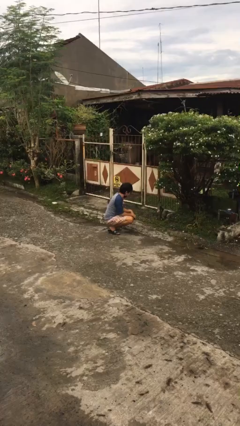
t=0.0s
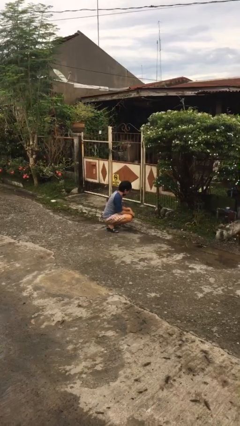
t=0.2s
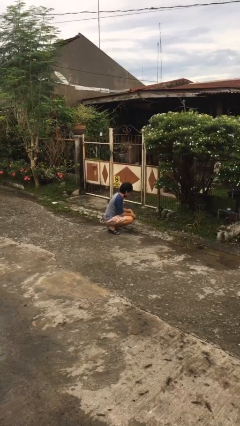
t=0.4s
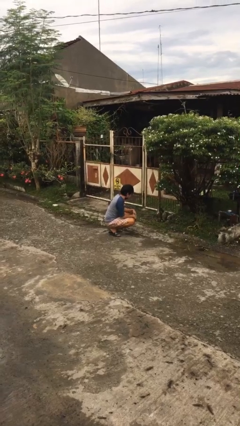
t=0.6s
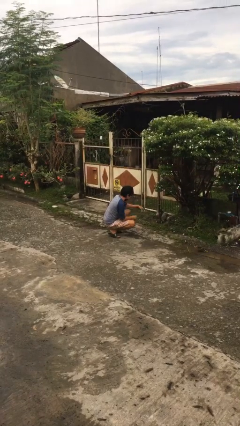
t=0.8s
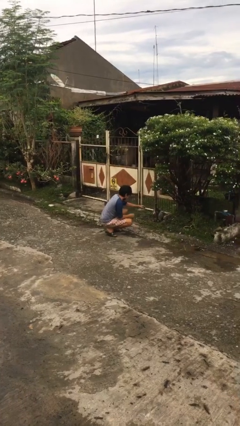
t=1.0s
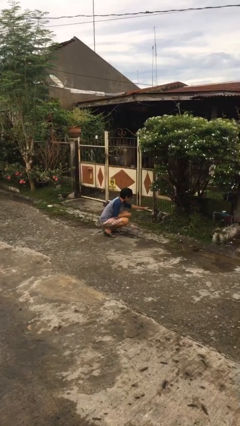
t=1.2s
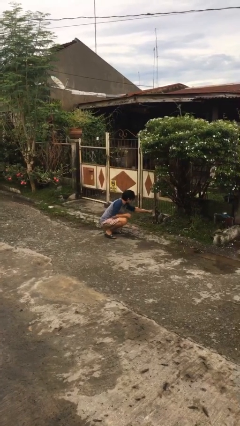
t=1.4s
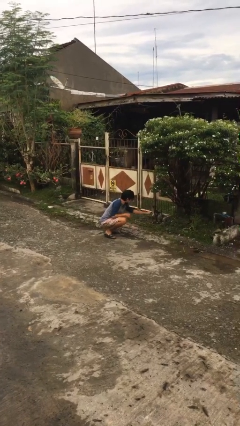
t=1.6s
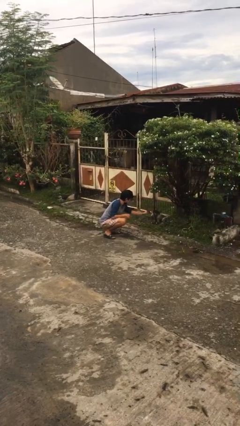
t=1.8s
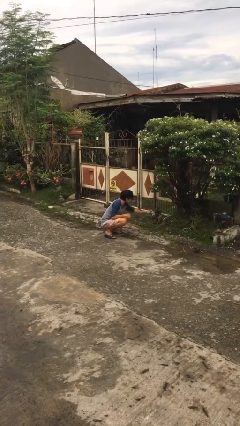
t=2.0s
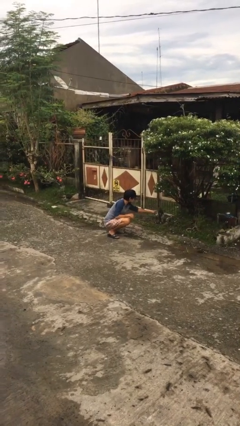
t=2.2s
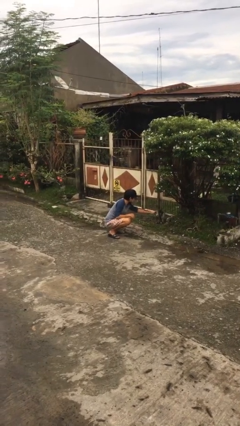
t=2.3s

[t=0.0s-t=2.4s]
person pets cat

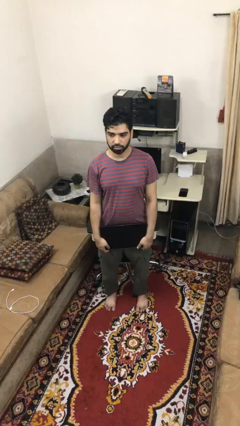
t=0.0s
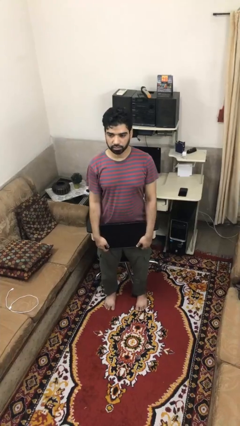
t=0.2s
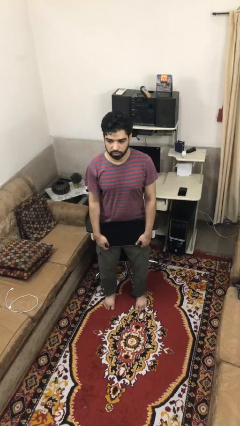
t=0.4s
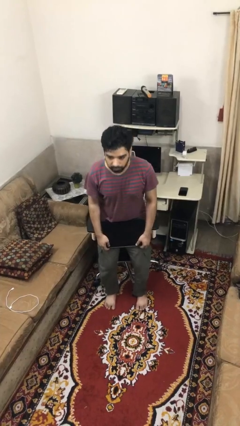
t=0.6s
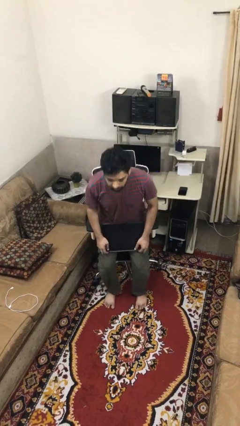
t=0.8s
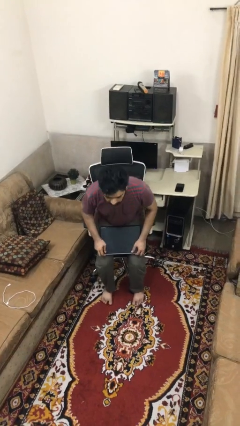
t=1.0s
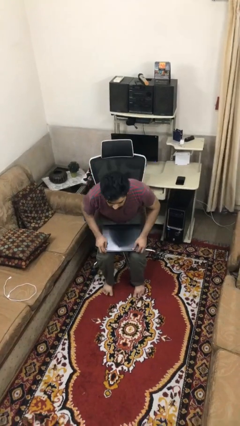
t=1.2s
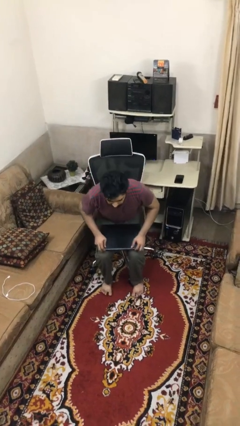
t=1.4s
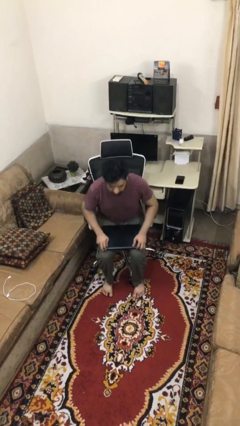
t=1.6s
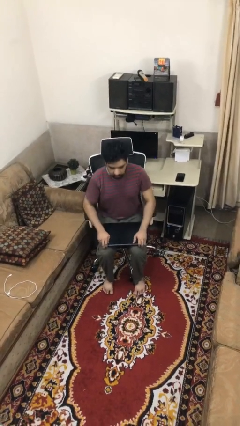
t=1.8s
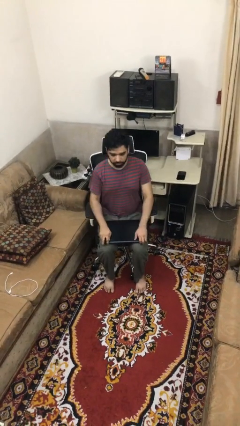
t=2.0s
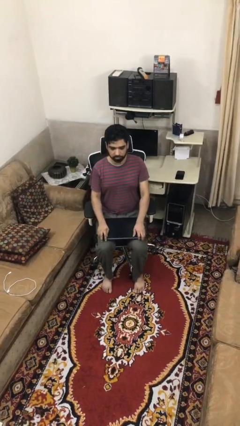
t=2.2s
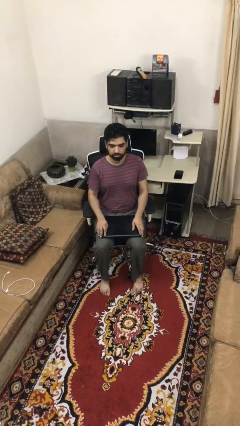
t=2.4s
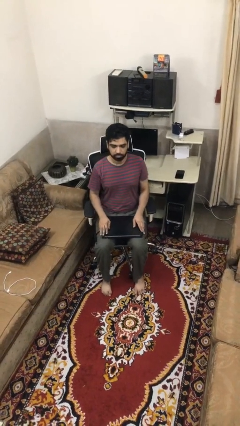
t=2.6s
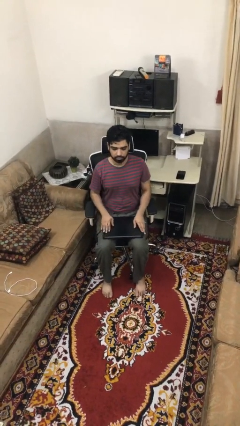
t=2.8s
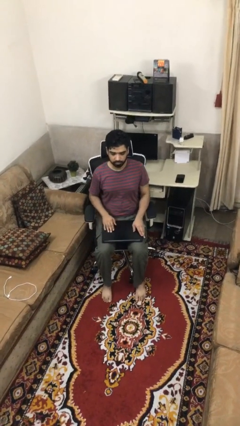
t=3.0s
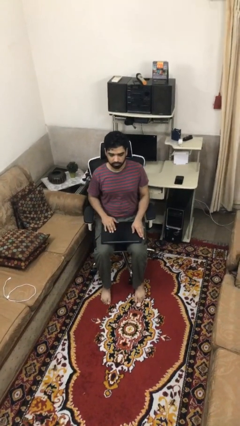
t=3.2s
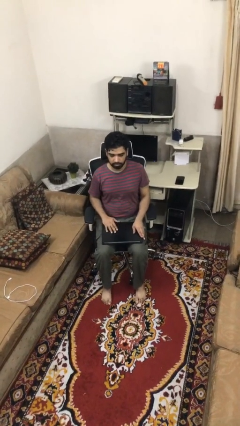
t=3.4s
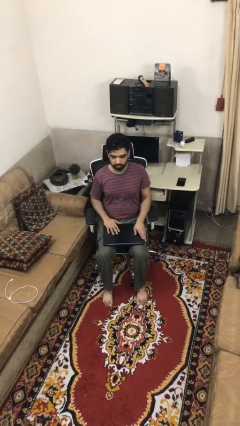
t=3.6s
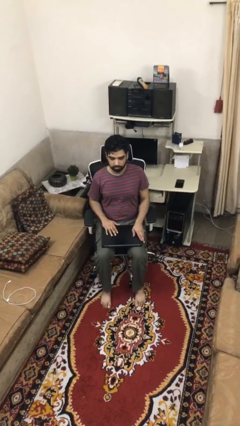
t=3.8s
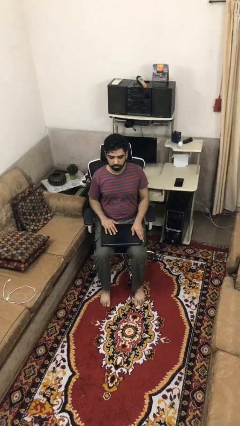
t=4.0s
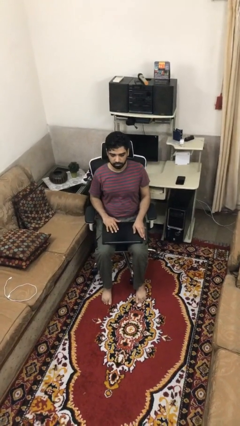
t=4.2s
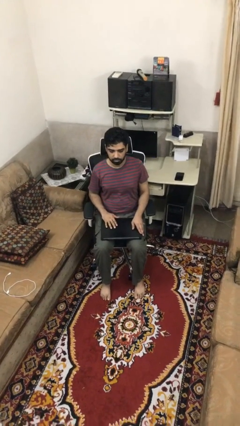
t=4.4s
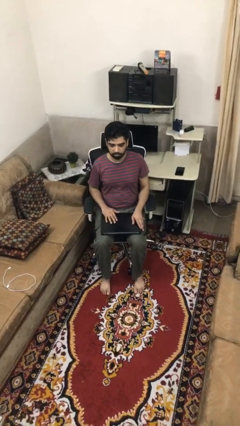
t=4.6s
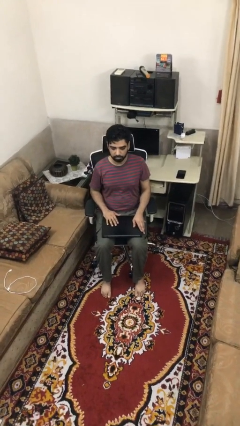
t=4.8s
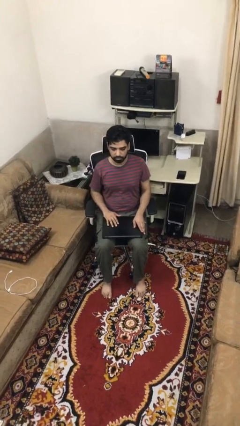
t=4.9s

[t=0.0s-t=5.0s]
person sits down

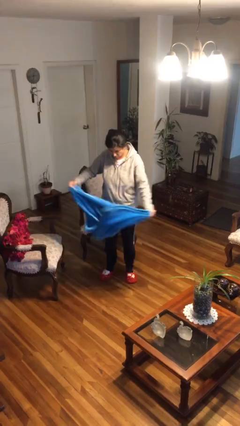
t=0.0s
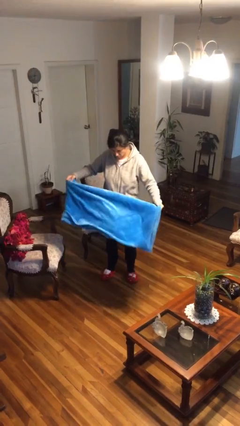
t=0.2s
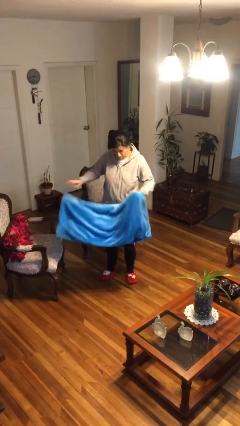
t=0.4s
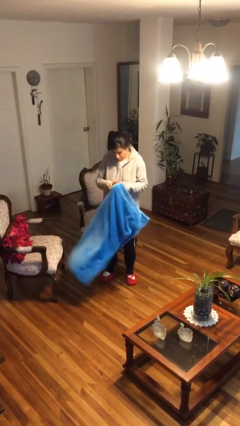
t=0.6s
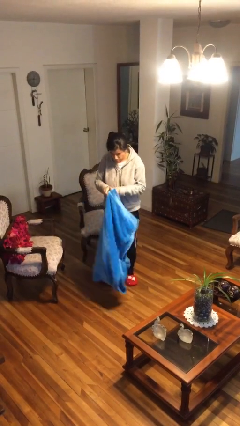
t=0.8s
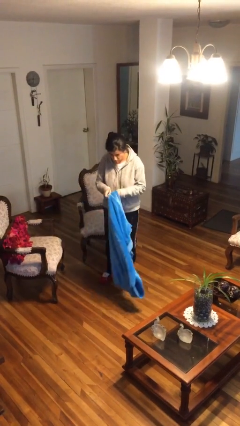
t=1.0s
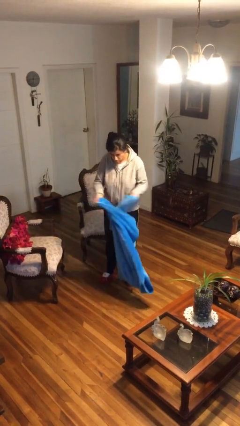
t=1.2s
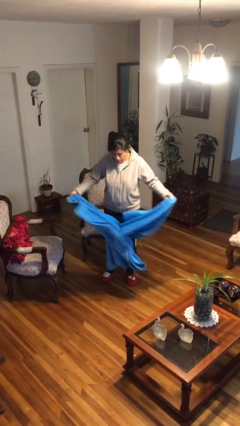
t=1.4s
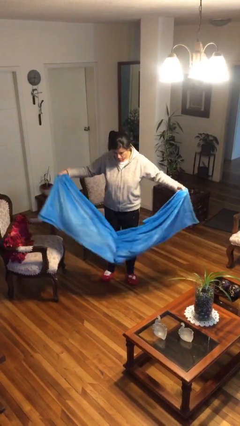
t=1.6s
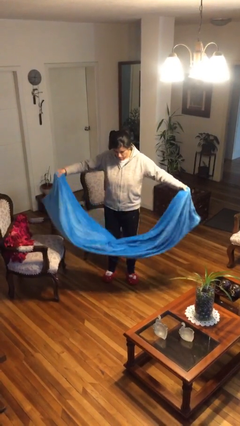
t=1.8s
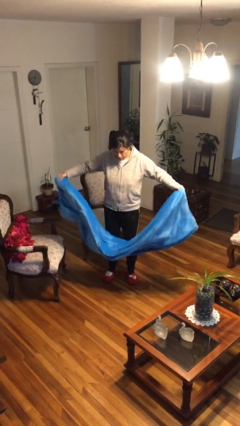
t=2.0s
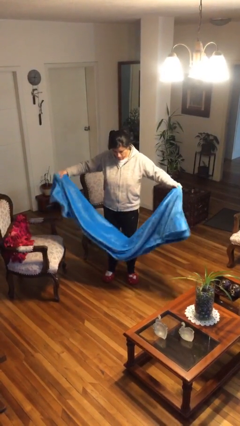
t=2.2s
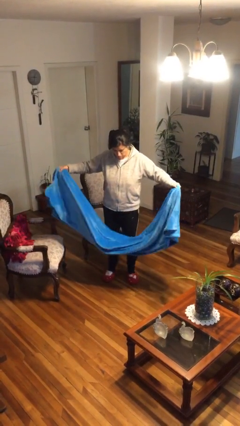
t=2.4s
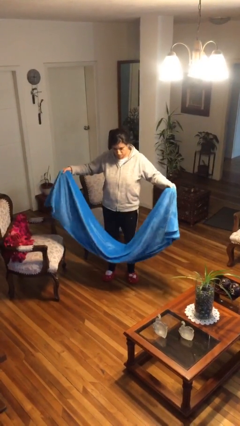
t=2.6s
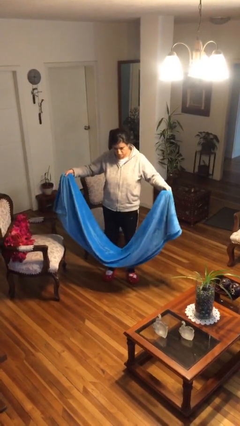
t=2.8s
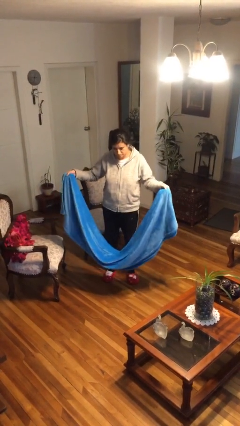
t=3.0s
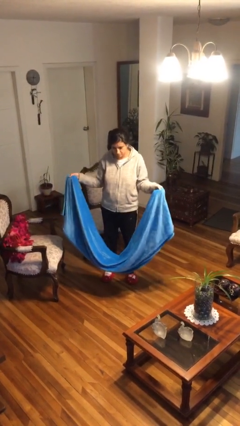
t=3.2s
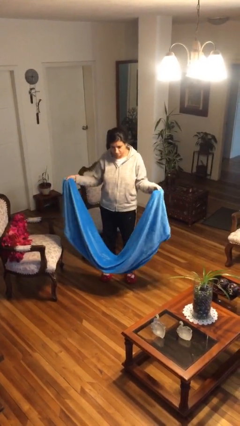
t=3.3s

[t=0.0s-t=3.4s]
person unfolds blanket

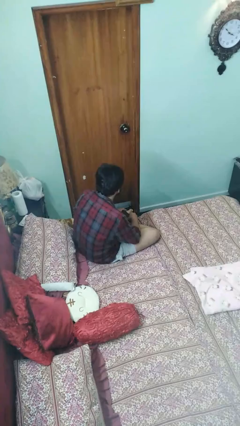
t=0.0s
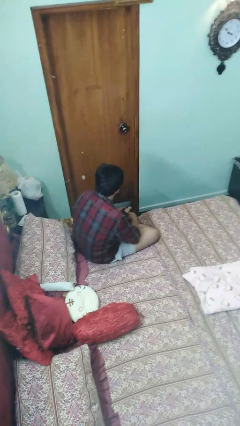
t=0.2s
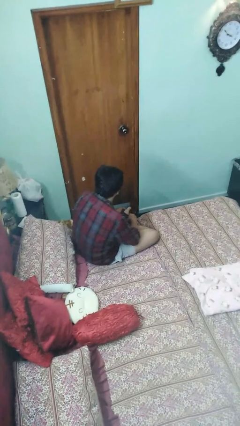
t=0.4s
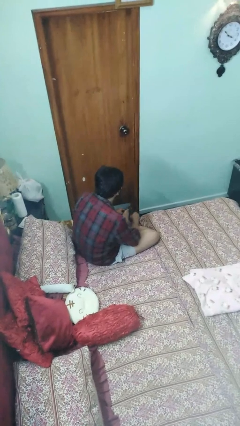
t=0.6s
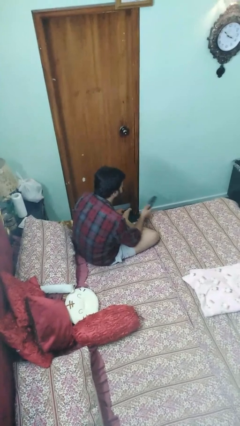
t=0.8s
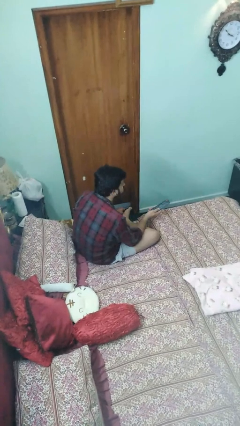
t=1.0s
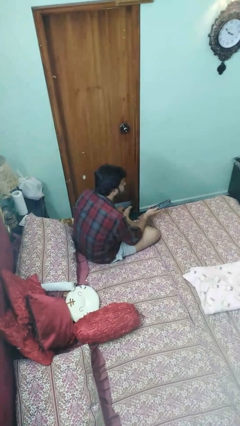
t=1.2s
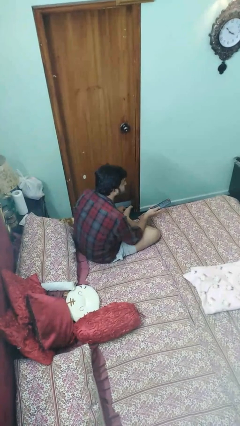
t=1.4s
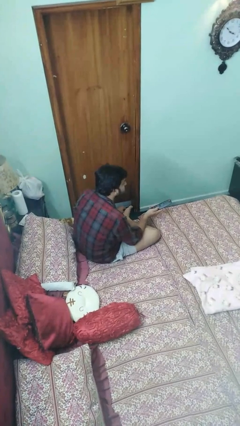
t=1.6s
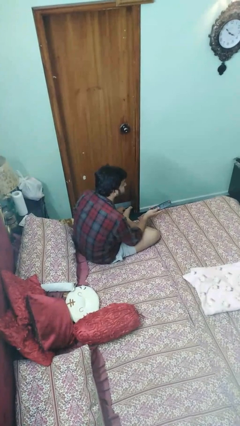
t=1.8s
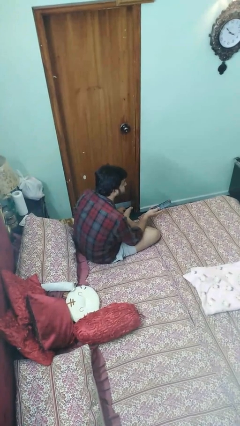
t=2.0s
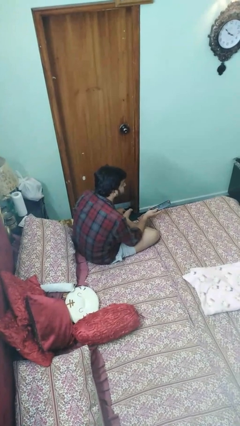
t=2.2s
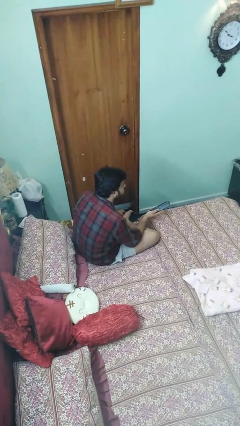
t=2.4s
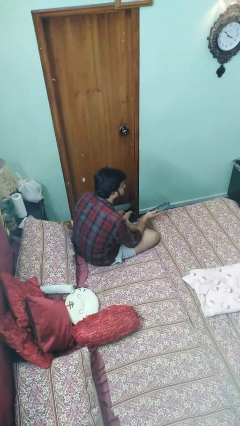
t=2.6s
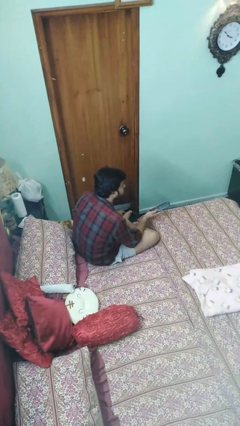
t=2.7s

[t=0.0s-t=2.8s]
person uses television remote

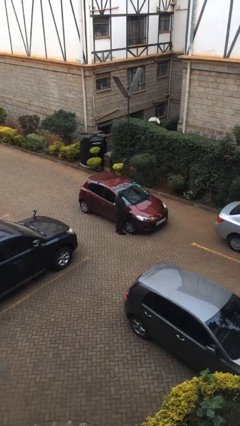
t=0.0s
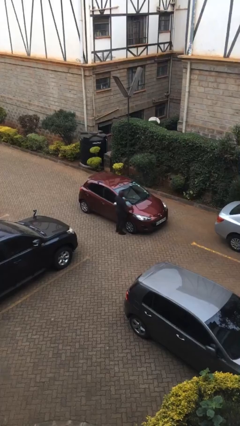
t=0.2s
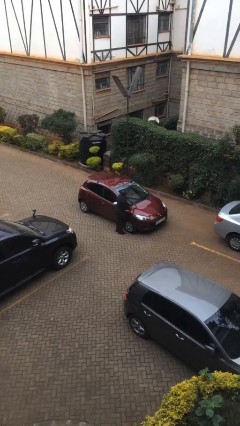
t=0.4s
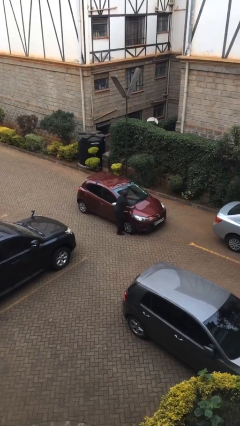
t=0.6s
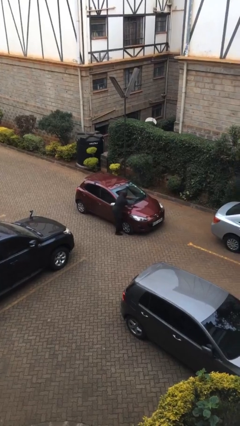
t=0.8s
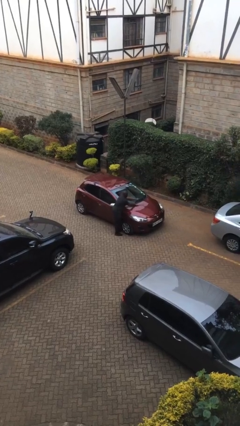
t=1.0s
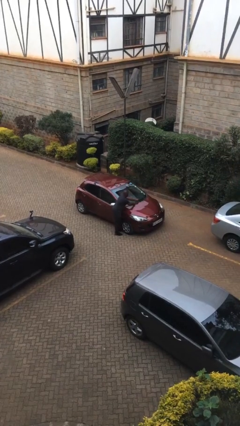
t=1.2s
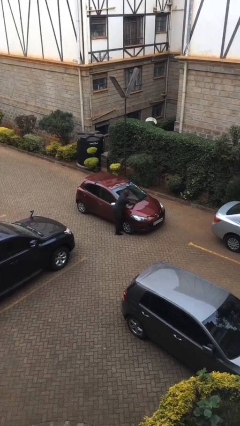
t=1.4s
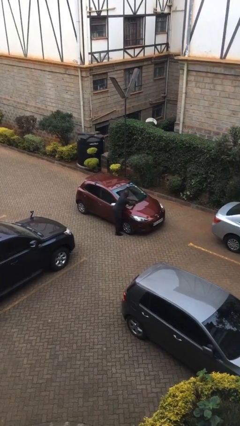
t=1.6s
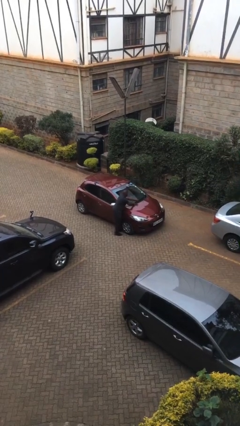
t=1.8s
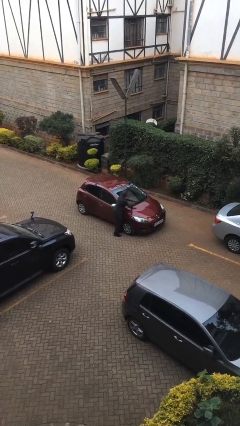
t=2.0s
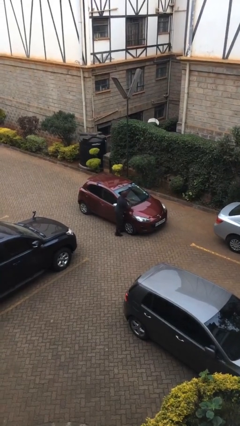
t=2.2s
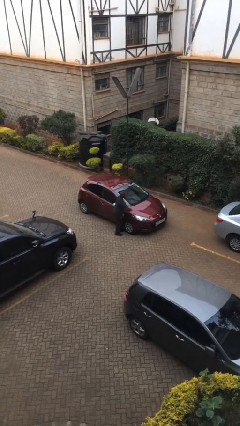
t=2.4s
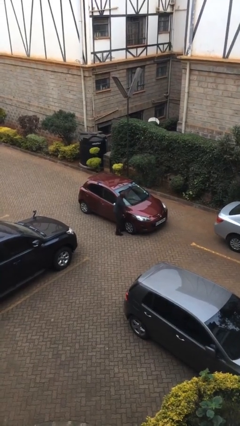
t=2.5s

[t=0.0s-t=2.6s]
person flips down car wipers

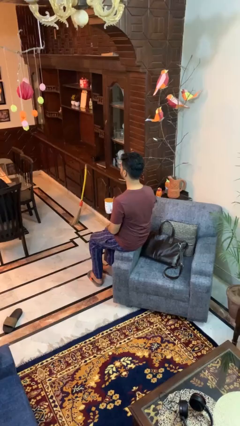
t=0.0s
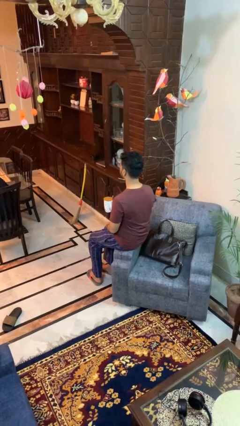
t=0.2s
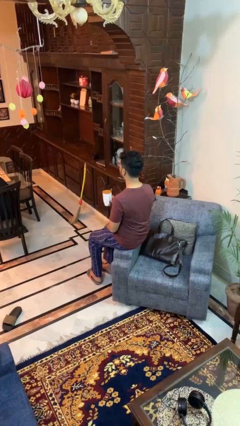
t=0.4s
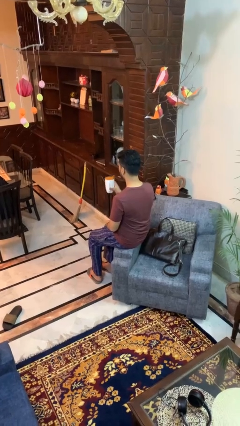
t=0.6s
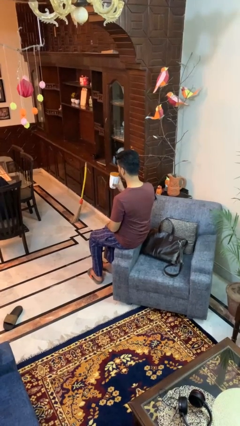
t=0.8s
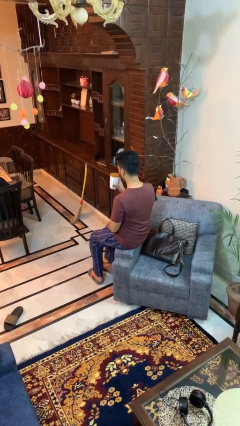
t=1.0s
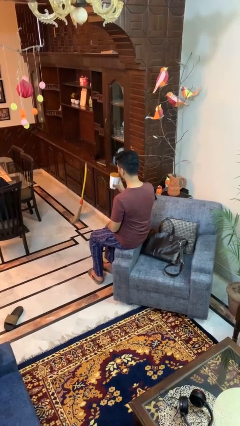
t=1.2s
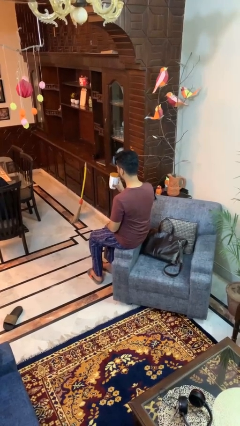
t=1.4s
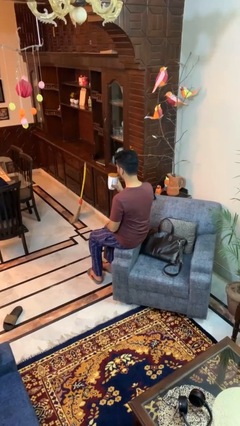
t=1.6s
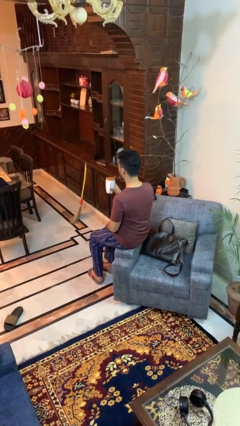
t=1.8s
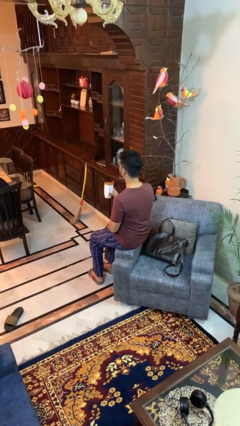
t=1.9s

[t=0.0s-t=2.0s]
person drinks from straw
